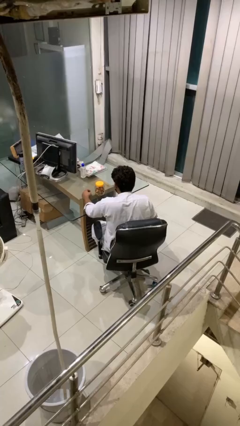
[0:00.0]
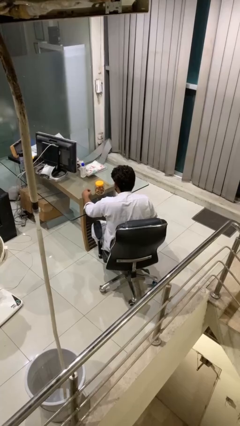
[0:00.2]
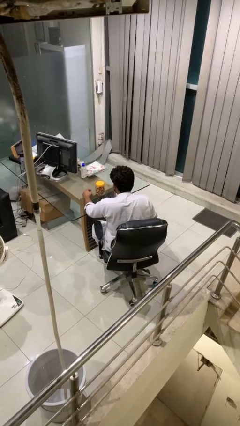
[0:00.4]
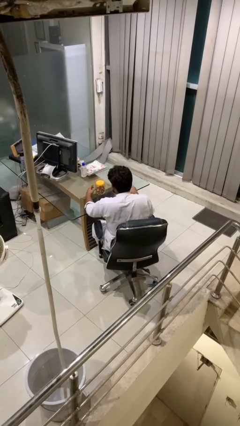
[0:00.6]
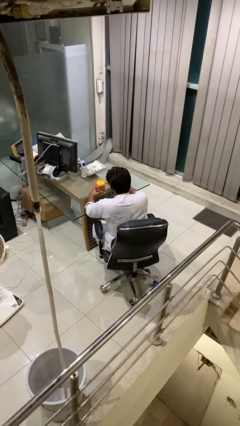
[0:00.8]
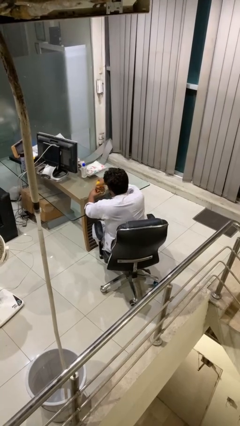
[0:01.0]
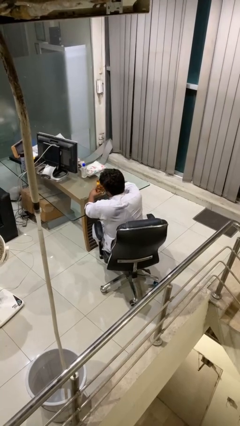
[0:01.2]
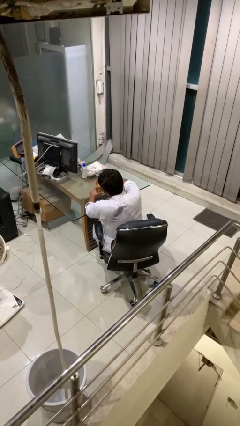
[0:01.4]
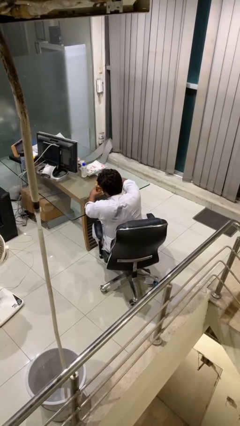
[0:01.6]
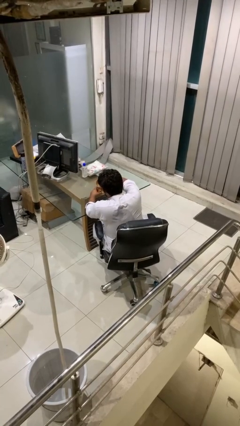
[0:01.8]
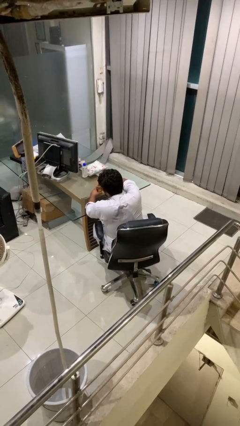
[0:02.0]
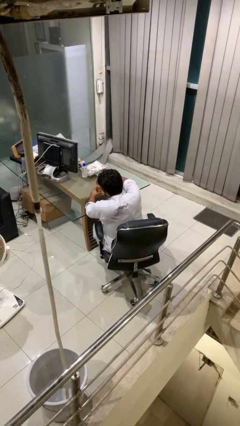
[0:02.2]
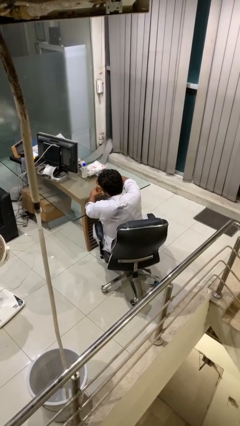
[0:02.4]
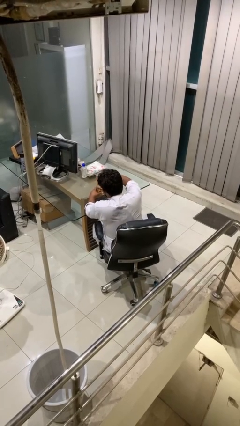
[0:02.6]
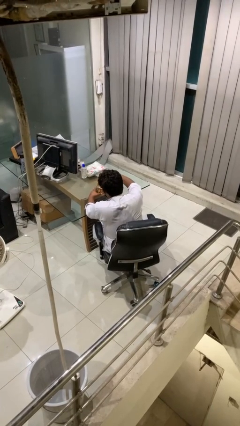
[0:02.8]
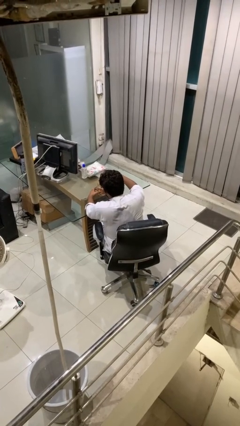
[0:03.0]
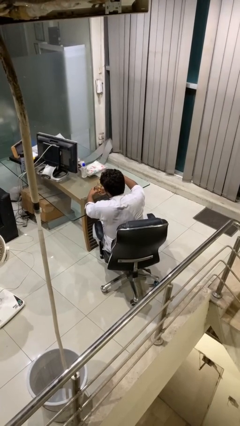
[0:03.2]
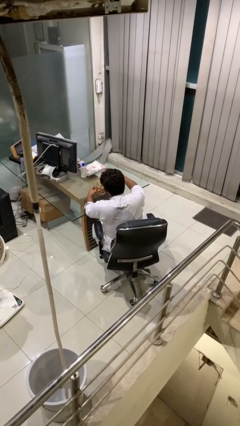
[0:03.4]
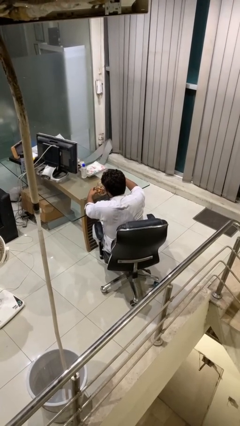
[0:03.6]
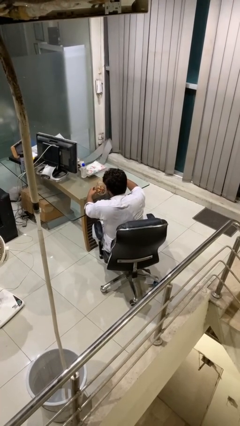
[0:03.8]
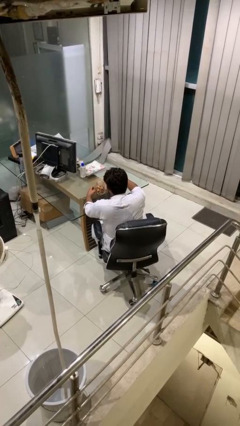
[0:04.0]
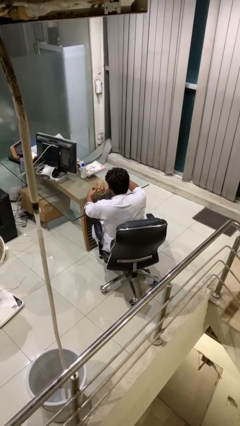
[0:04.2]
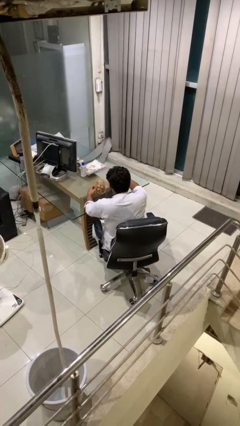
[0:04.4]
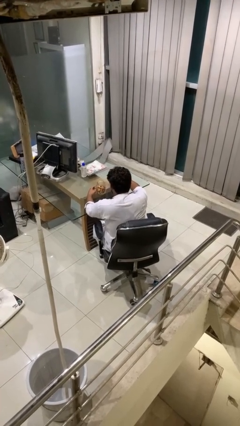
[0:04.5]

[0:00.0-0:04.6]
person opens jar

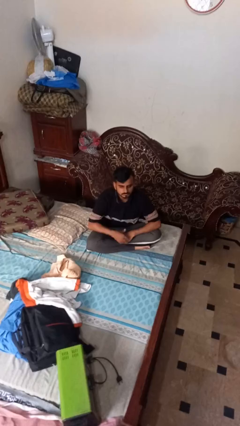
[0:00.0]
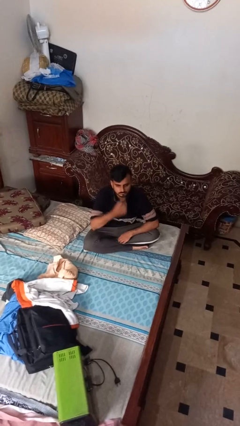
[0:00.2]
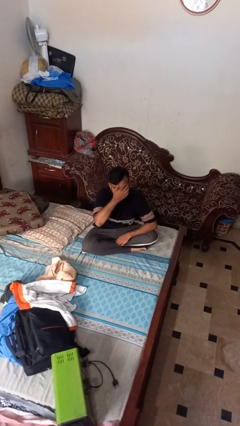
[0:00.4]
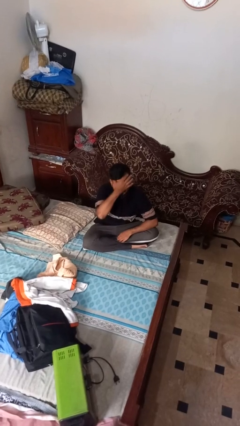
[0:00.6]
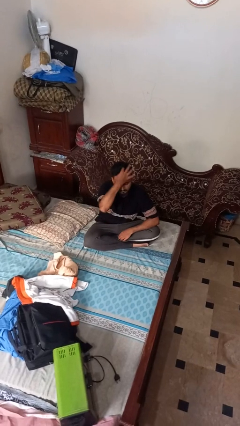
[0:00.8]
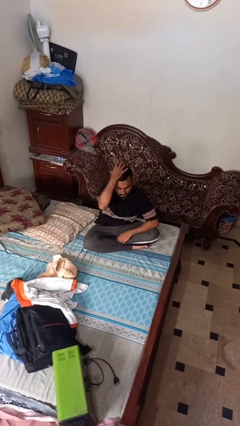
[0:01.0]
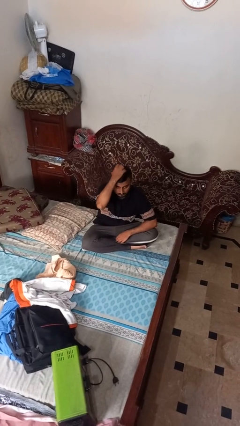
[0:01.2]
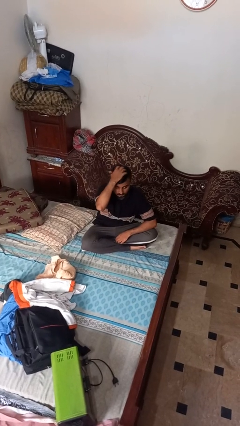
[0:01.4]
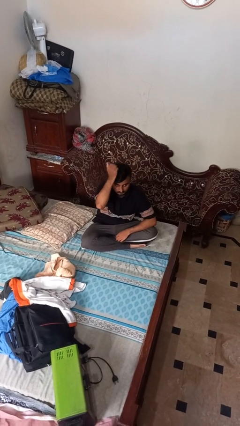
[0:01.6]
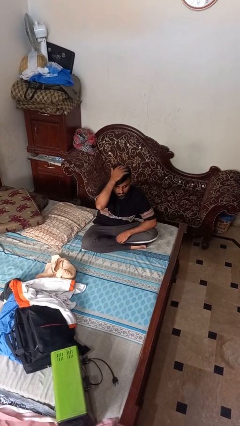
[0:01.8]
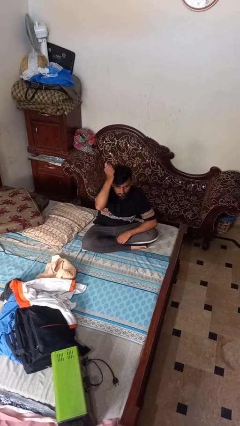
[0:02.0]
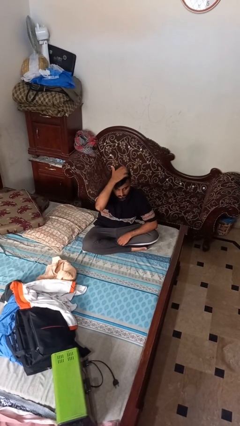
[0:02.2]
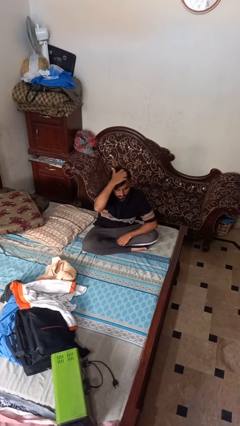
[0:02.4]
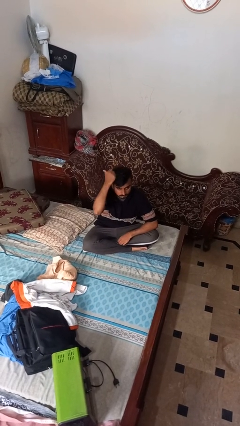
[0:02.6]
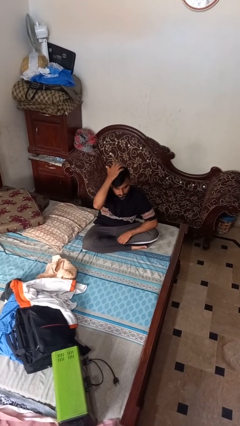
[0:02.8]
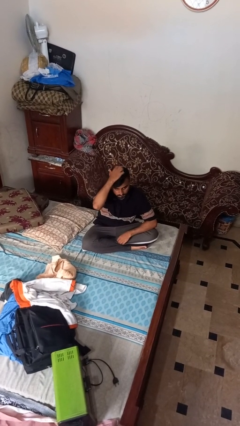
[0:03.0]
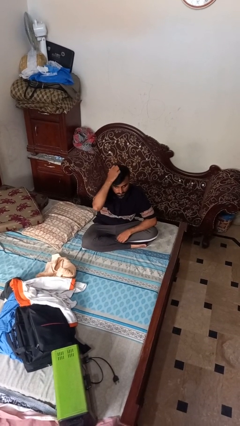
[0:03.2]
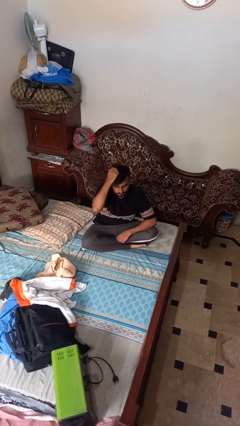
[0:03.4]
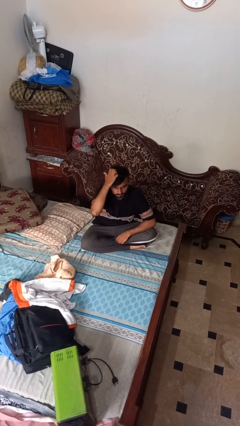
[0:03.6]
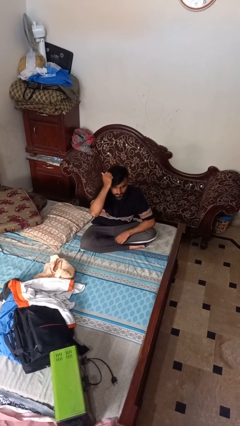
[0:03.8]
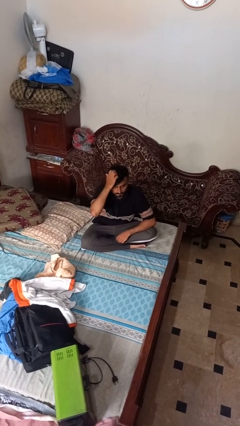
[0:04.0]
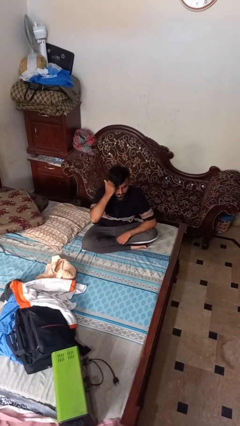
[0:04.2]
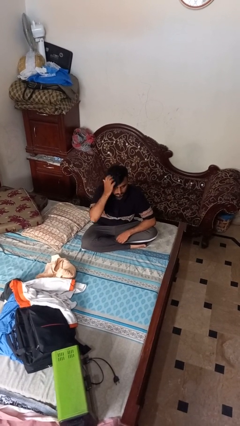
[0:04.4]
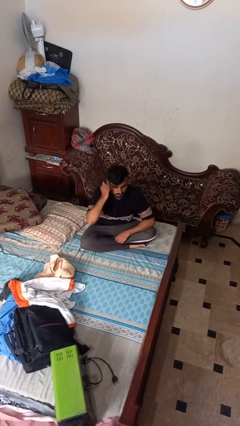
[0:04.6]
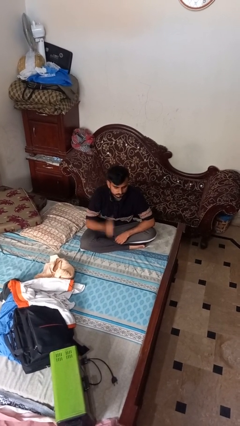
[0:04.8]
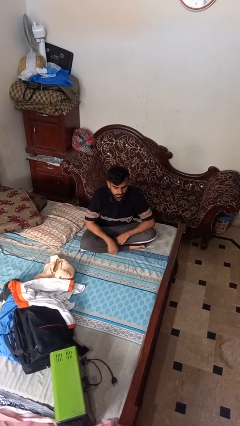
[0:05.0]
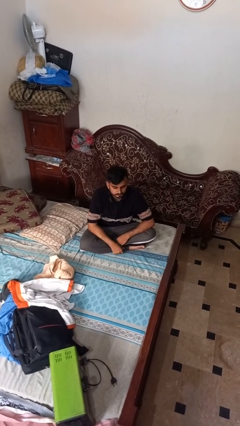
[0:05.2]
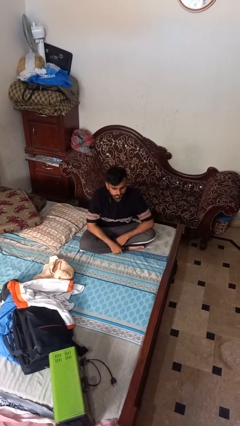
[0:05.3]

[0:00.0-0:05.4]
person strokes hair

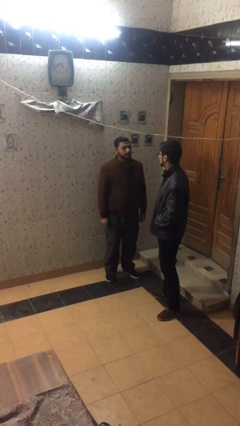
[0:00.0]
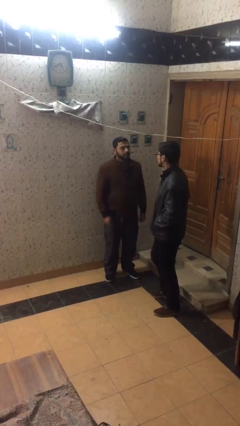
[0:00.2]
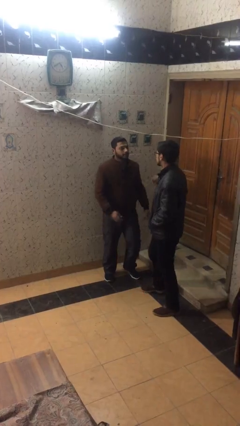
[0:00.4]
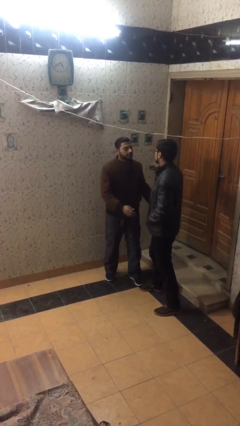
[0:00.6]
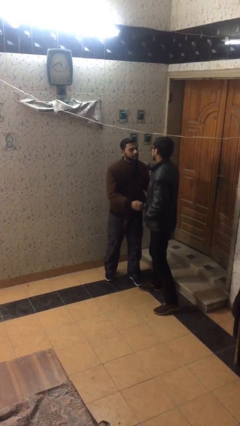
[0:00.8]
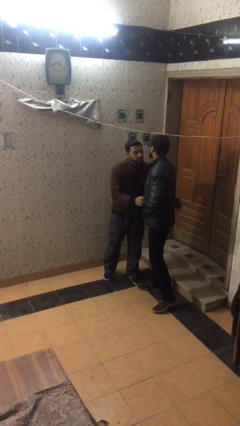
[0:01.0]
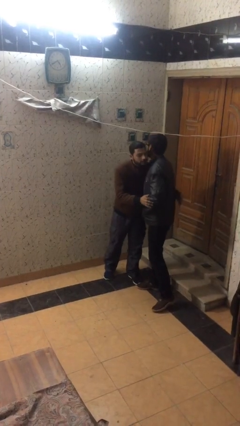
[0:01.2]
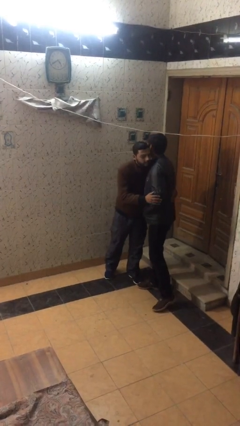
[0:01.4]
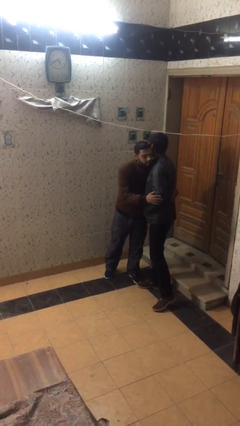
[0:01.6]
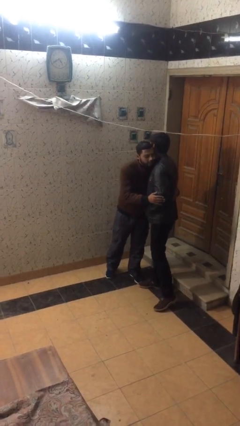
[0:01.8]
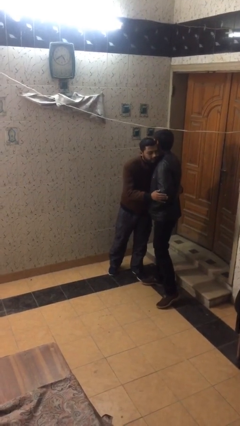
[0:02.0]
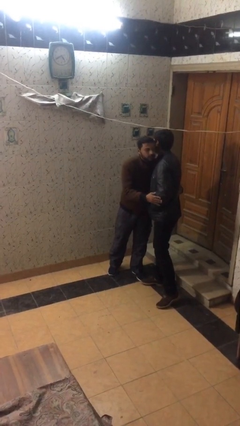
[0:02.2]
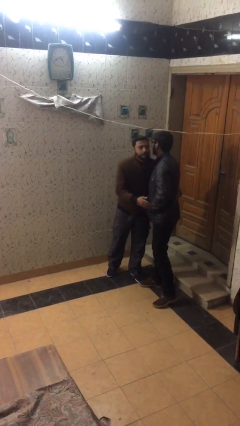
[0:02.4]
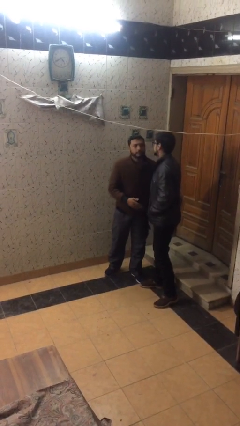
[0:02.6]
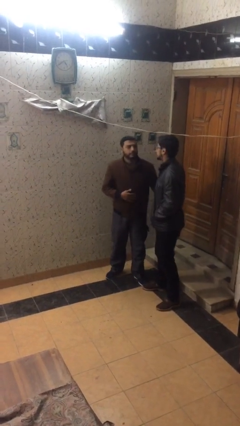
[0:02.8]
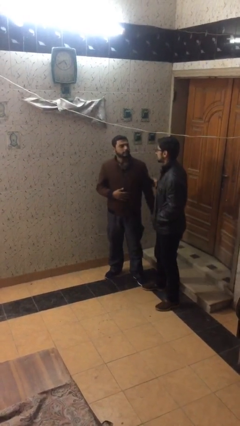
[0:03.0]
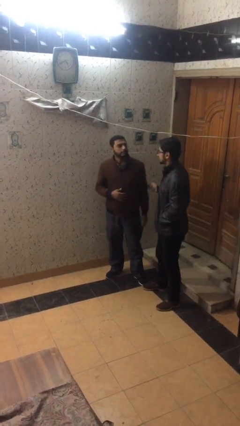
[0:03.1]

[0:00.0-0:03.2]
person embraces person

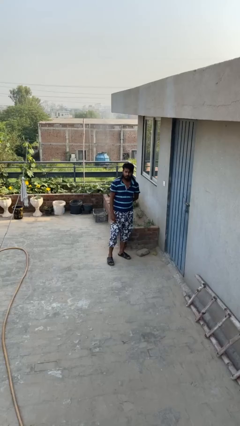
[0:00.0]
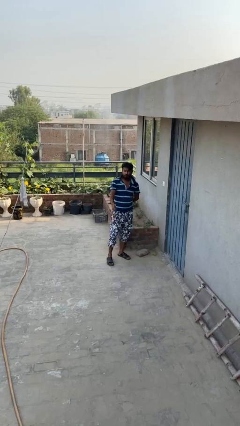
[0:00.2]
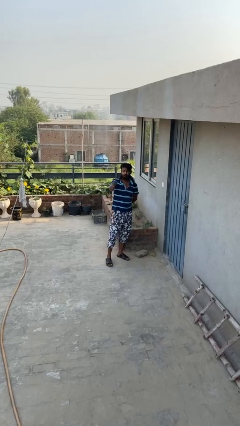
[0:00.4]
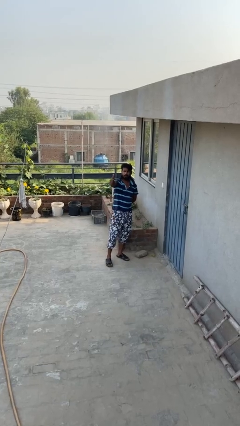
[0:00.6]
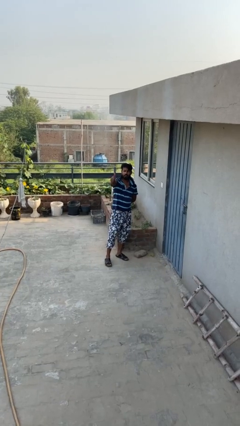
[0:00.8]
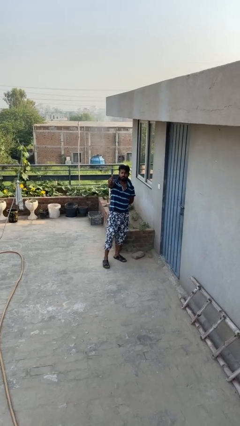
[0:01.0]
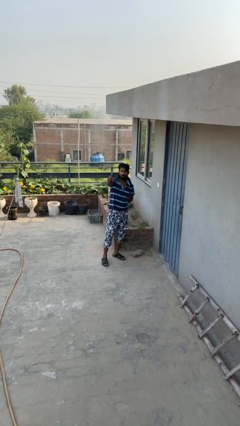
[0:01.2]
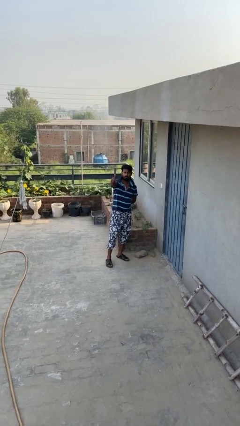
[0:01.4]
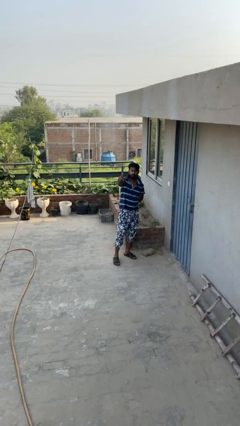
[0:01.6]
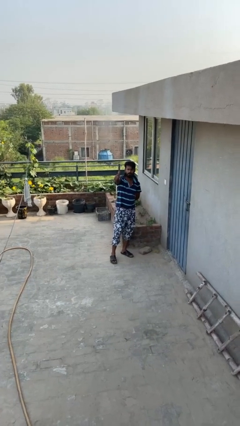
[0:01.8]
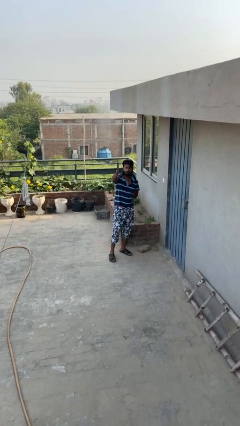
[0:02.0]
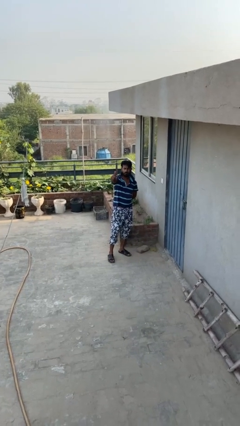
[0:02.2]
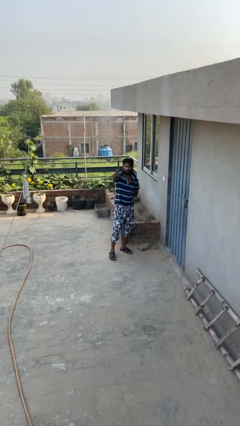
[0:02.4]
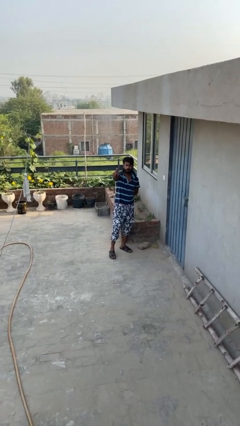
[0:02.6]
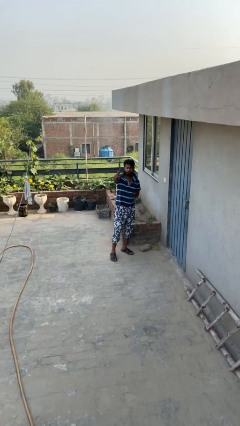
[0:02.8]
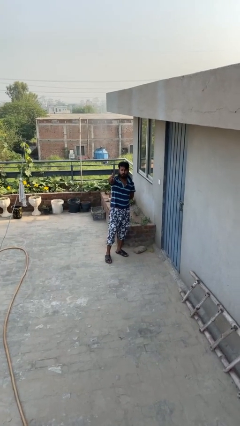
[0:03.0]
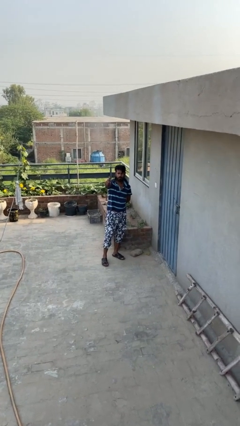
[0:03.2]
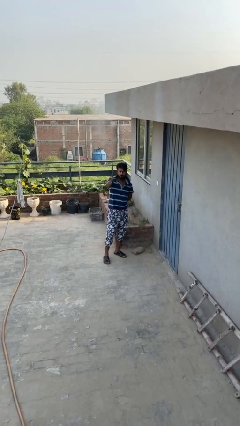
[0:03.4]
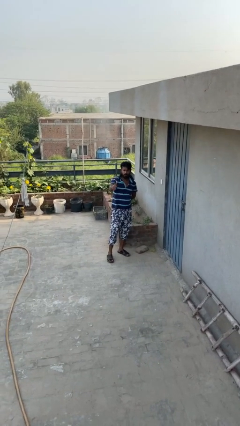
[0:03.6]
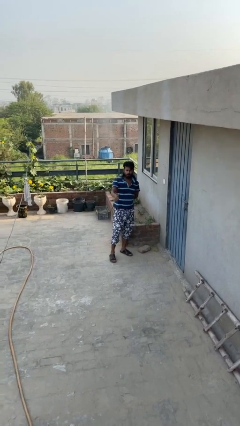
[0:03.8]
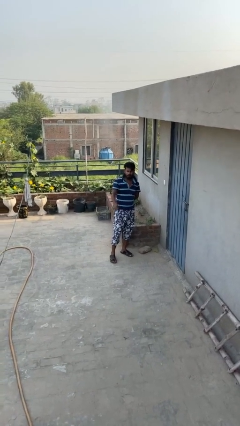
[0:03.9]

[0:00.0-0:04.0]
person gestures thumbs up

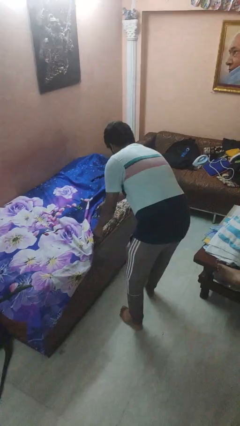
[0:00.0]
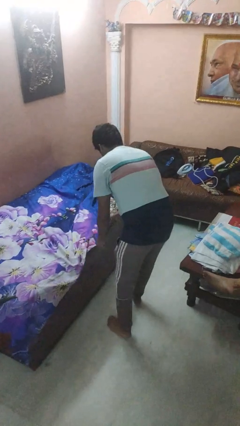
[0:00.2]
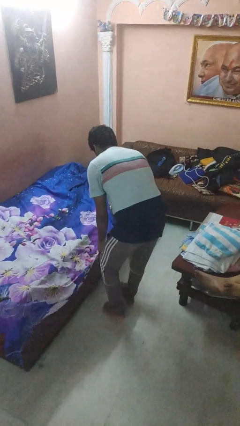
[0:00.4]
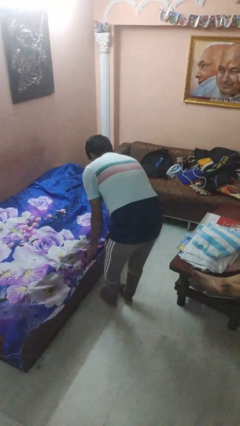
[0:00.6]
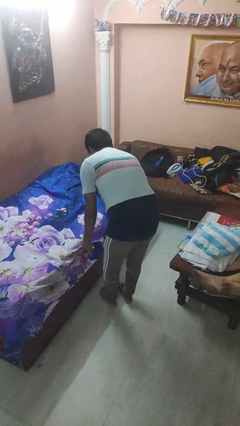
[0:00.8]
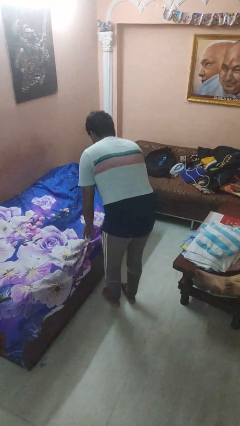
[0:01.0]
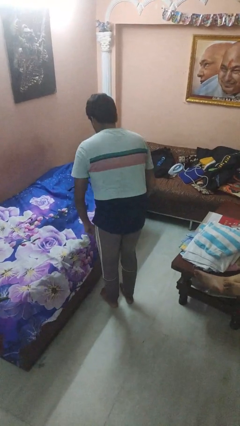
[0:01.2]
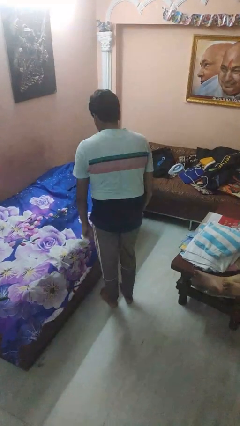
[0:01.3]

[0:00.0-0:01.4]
person makes bed
